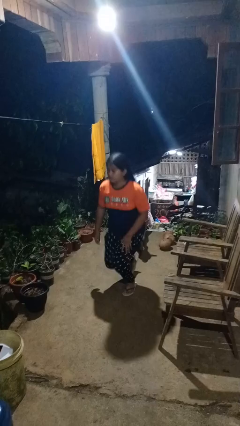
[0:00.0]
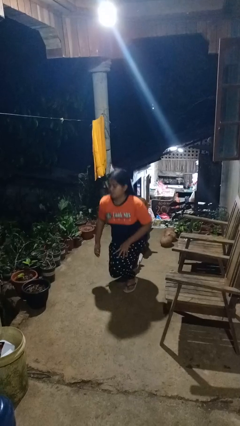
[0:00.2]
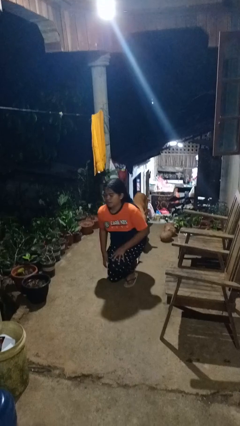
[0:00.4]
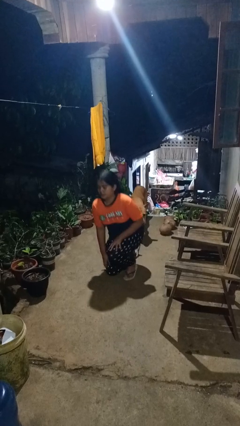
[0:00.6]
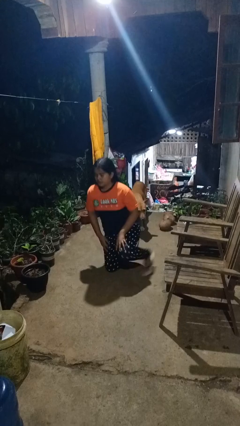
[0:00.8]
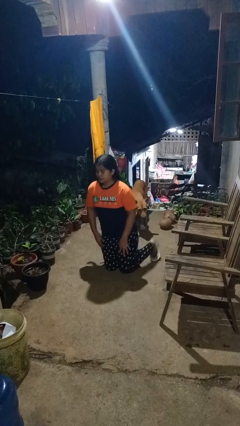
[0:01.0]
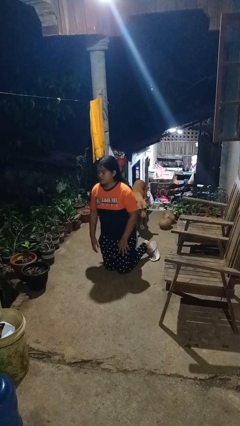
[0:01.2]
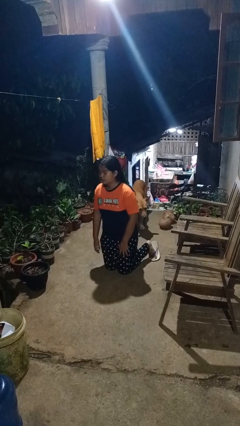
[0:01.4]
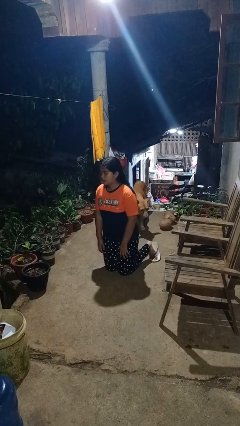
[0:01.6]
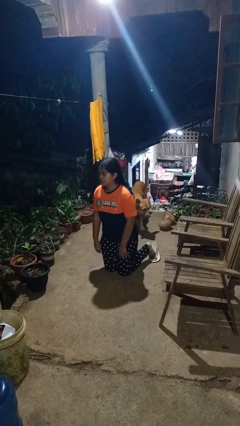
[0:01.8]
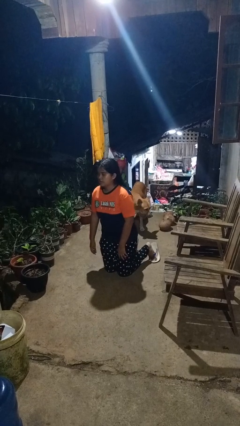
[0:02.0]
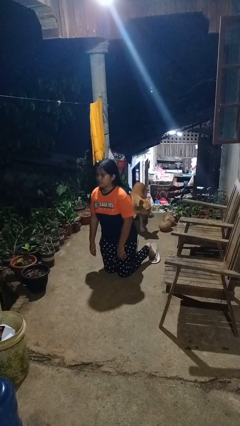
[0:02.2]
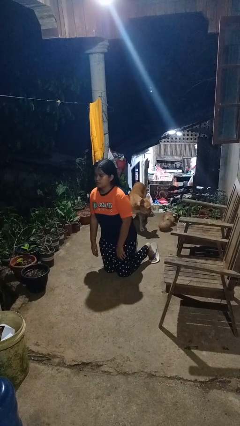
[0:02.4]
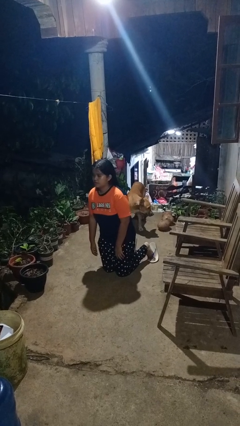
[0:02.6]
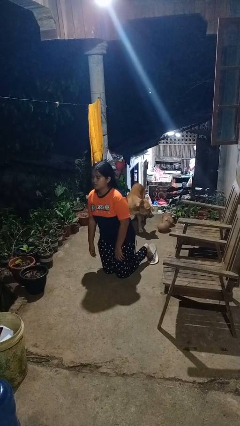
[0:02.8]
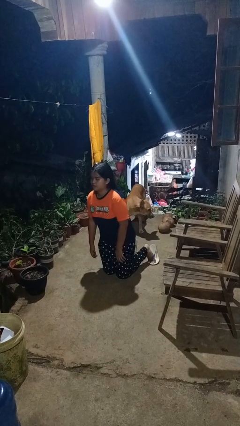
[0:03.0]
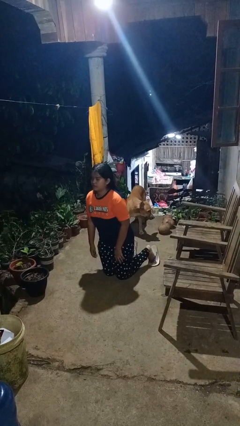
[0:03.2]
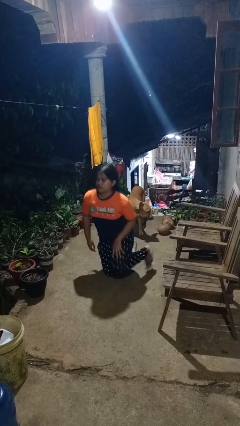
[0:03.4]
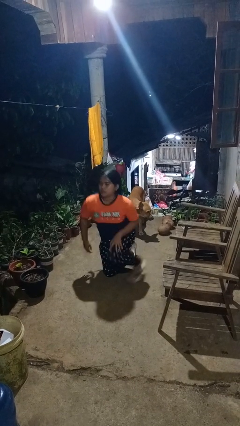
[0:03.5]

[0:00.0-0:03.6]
person kneels

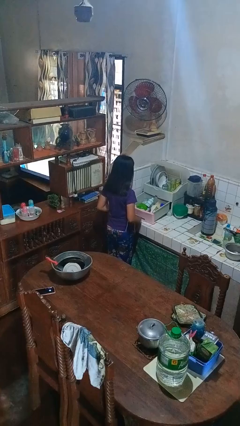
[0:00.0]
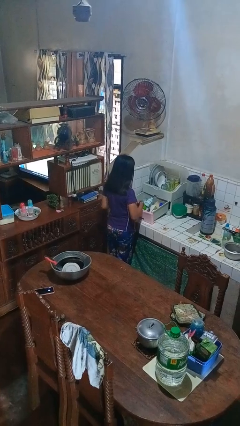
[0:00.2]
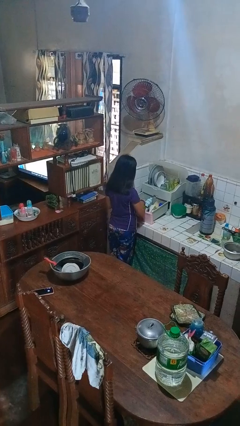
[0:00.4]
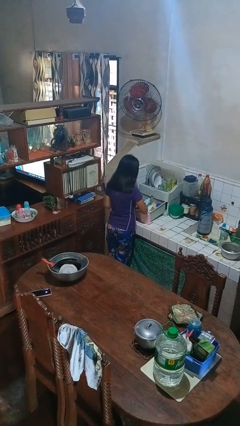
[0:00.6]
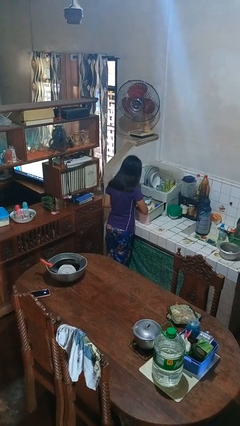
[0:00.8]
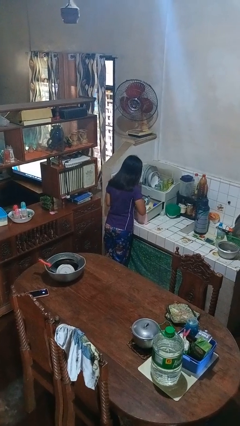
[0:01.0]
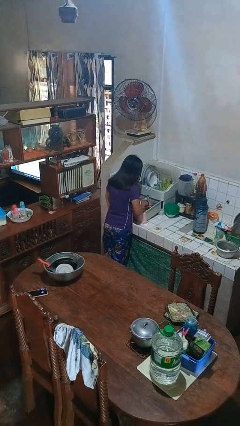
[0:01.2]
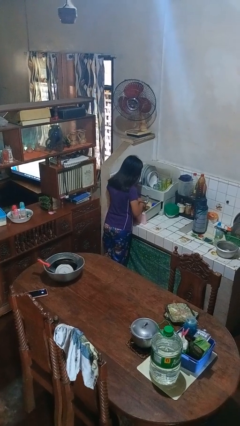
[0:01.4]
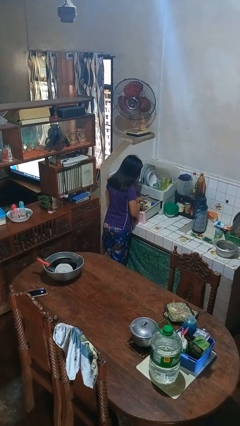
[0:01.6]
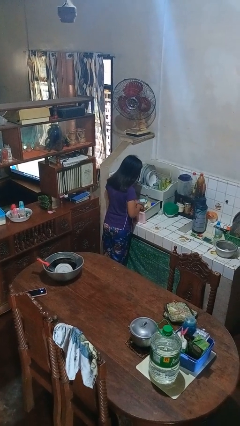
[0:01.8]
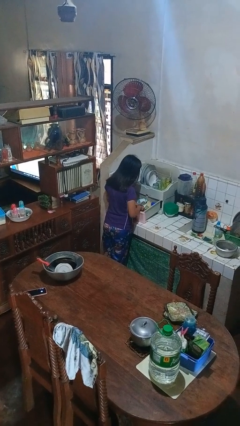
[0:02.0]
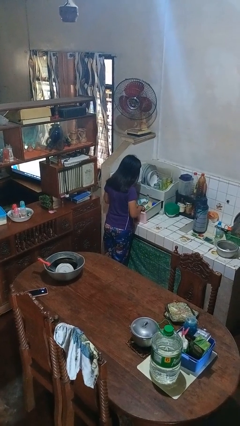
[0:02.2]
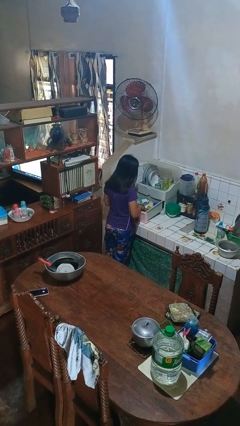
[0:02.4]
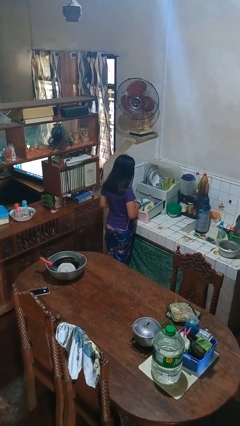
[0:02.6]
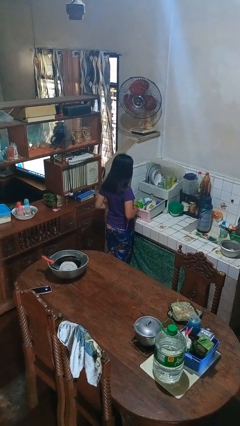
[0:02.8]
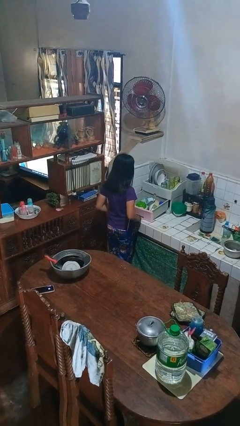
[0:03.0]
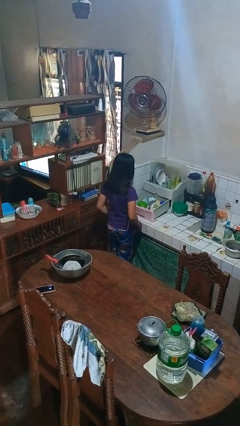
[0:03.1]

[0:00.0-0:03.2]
person searches in kitchen drawer

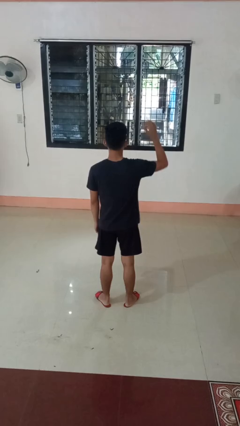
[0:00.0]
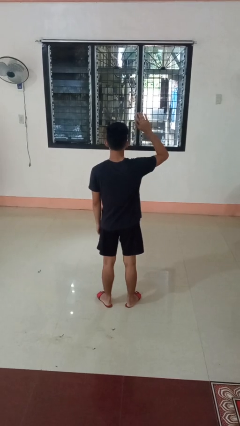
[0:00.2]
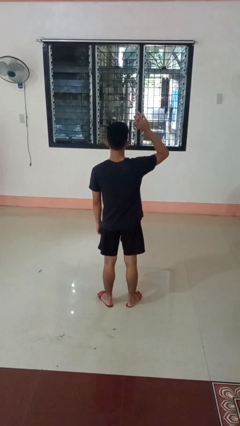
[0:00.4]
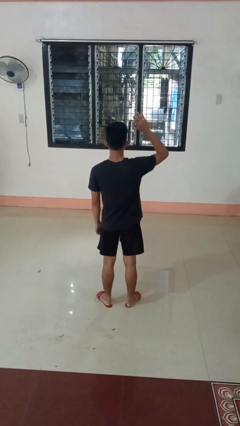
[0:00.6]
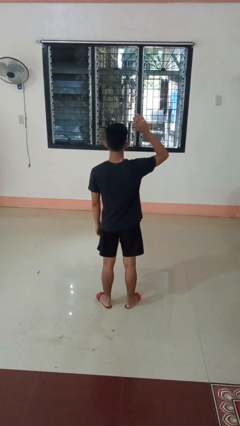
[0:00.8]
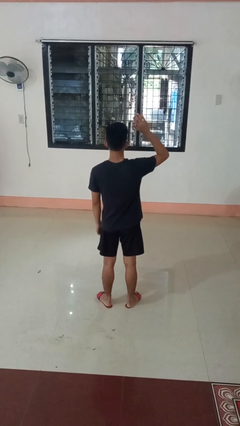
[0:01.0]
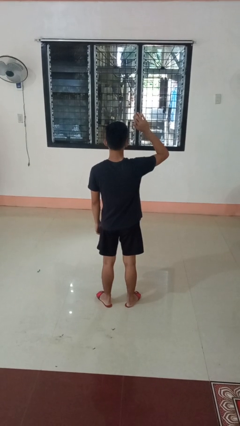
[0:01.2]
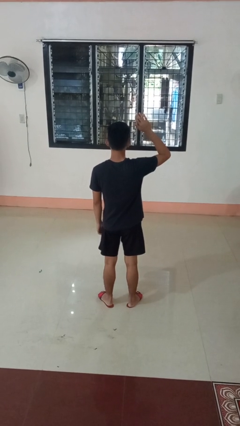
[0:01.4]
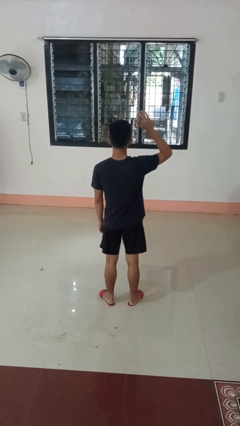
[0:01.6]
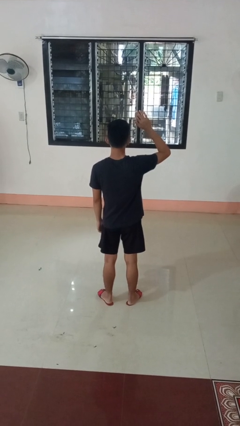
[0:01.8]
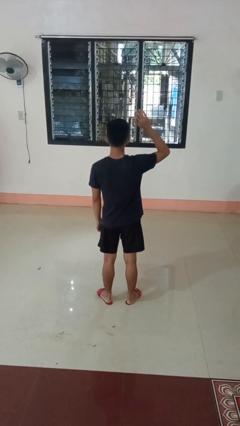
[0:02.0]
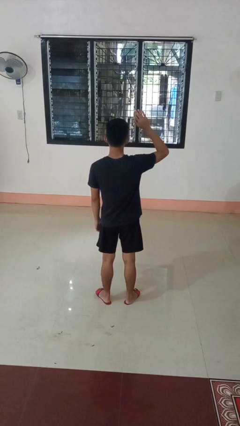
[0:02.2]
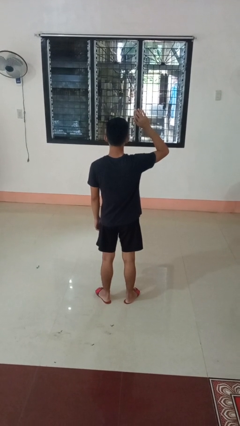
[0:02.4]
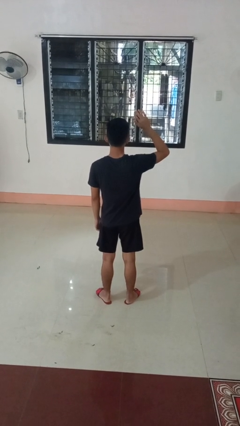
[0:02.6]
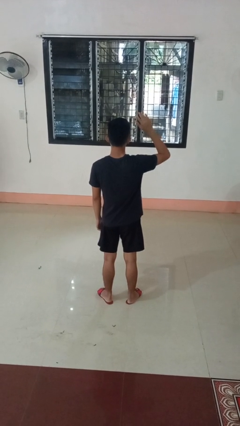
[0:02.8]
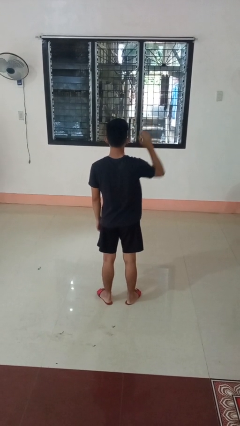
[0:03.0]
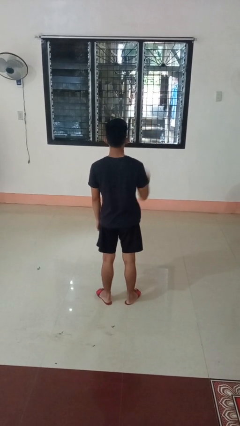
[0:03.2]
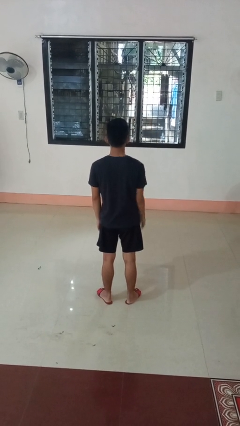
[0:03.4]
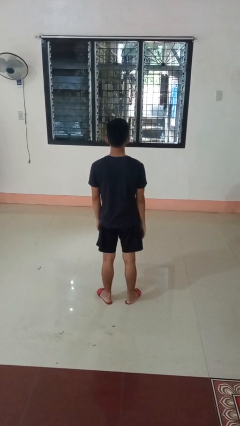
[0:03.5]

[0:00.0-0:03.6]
person gestures raise hand

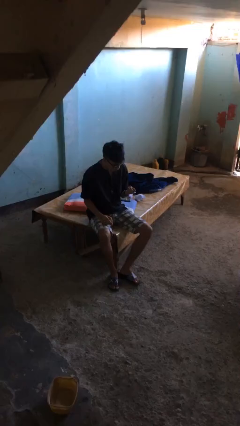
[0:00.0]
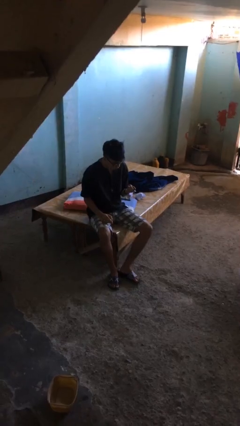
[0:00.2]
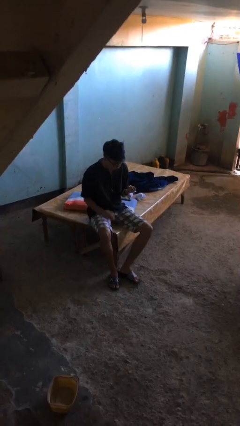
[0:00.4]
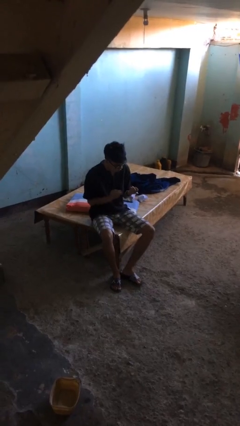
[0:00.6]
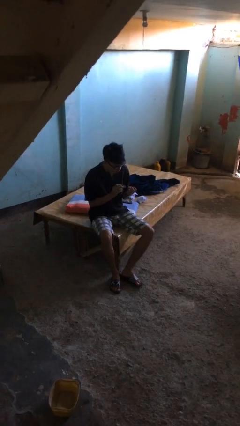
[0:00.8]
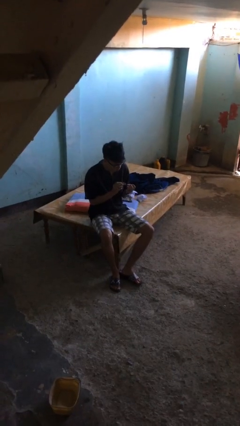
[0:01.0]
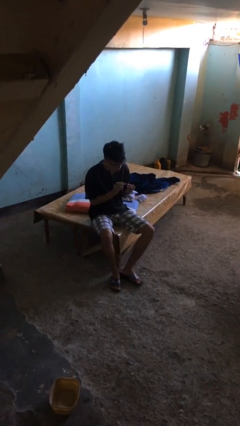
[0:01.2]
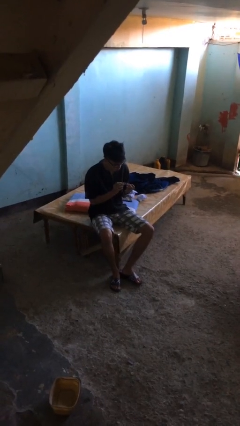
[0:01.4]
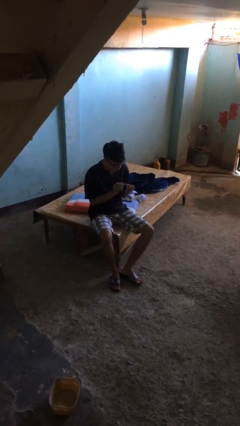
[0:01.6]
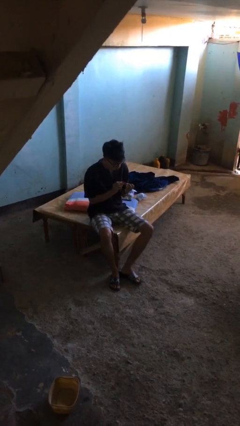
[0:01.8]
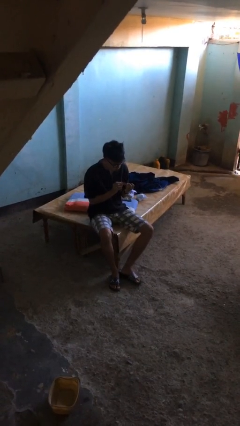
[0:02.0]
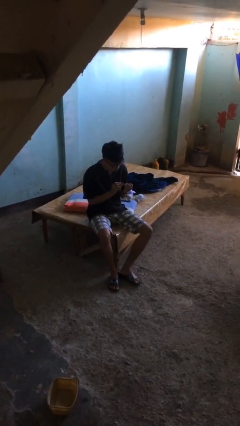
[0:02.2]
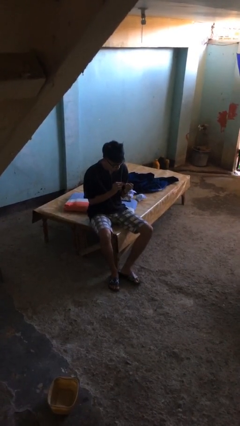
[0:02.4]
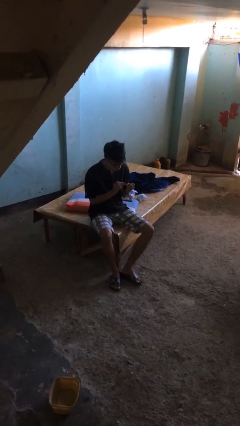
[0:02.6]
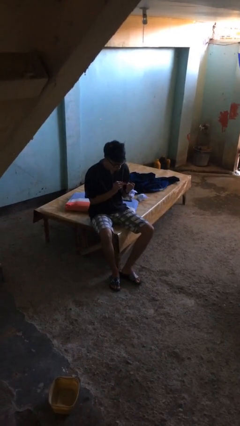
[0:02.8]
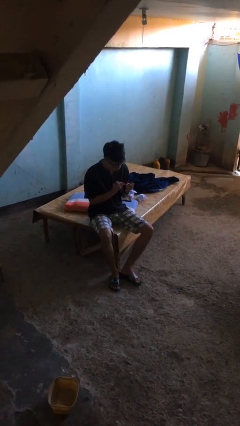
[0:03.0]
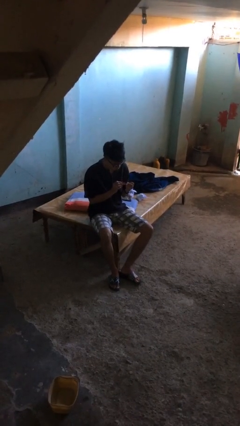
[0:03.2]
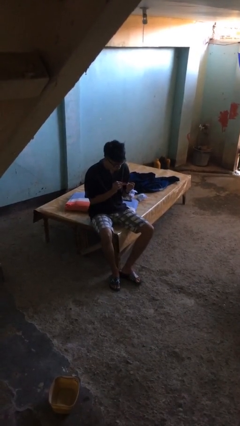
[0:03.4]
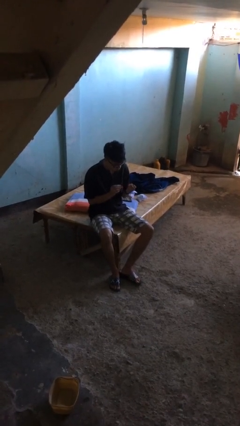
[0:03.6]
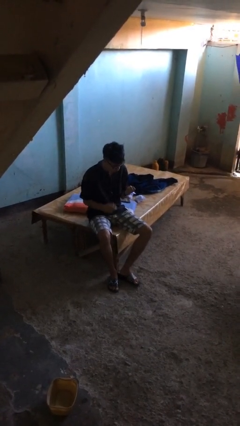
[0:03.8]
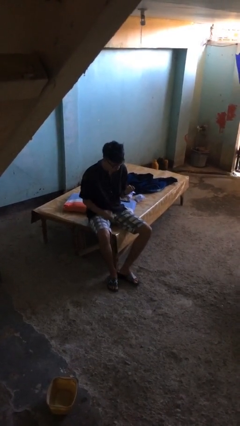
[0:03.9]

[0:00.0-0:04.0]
person clips fingernails

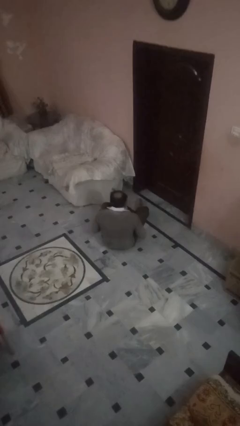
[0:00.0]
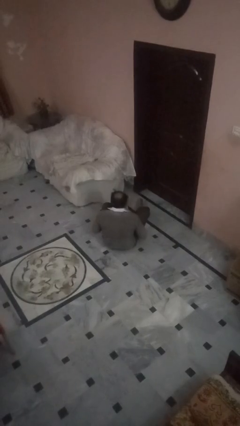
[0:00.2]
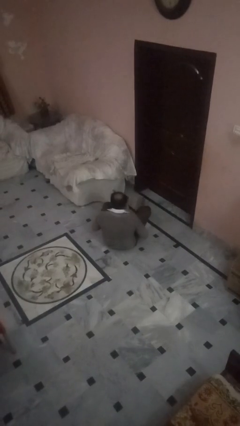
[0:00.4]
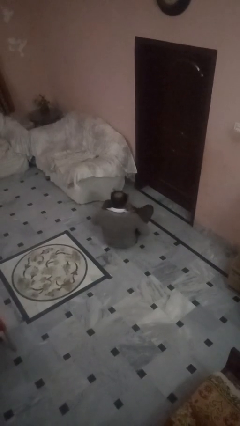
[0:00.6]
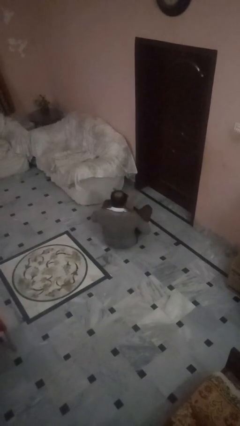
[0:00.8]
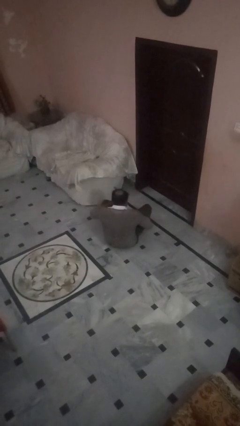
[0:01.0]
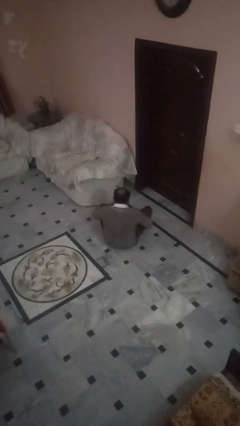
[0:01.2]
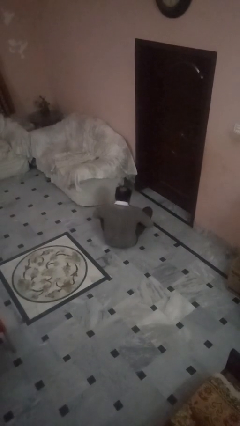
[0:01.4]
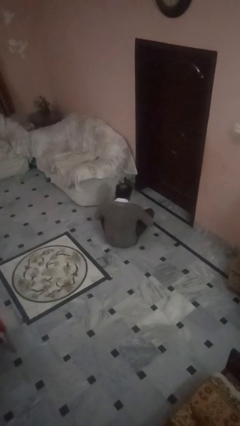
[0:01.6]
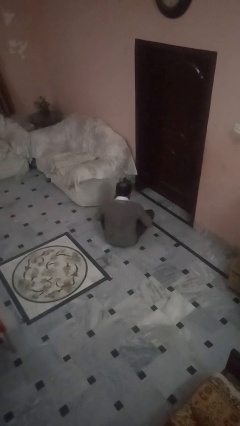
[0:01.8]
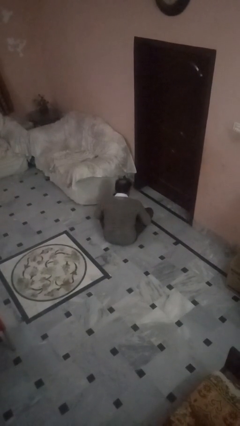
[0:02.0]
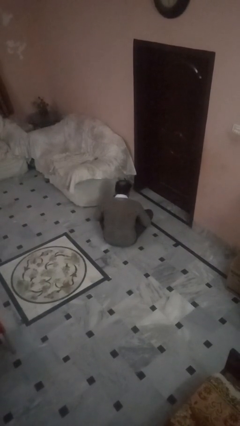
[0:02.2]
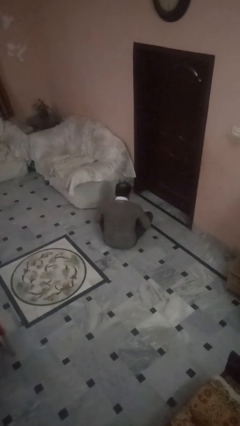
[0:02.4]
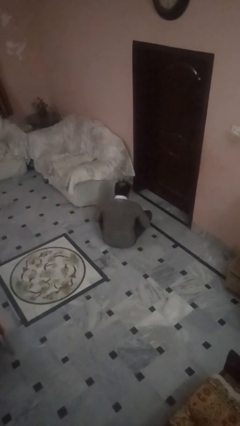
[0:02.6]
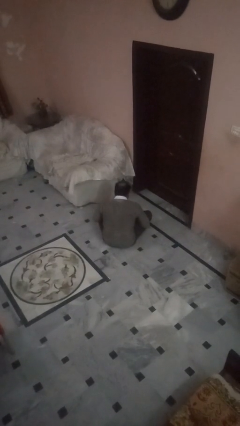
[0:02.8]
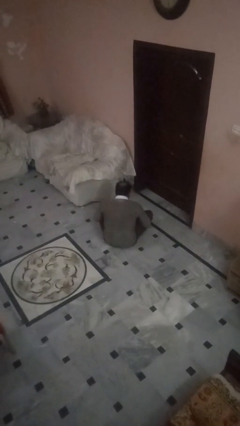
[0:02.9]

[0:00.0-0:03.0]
person crosses legs

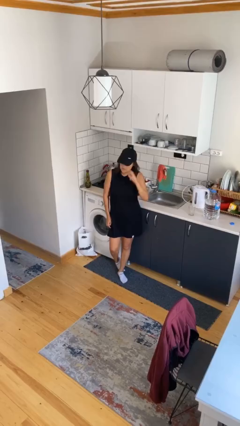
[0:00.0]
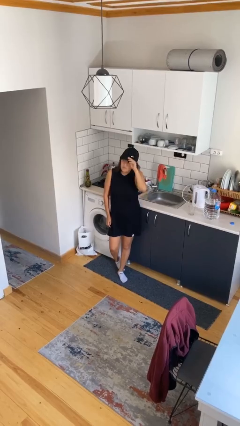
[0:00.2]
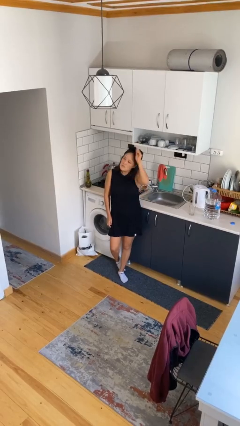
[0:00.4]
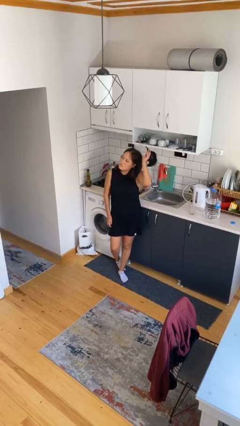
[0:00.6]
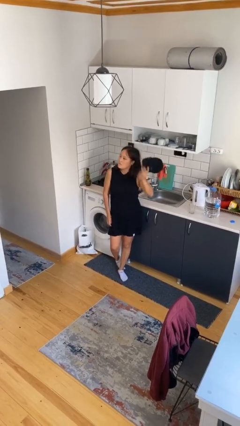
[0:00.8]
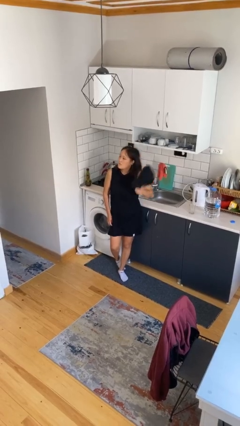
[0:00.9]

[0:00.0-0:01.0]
person takes off hat
